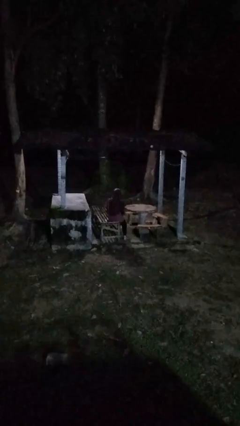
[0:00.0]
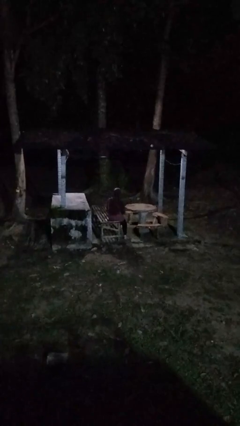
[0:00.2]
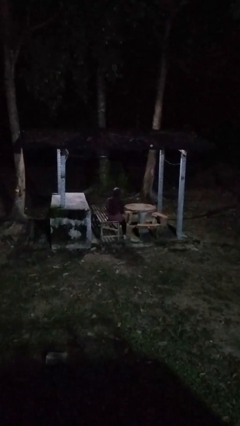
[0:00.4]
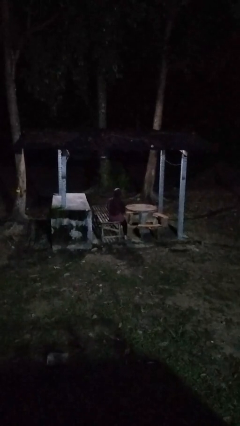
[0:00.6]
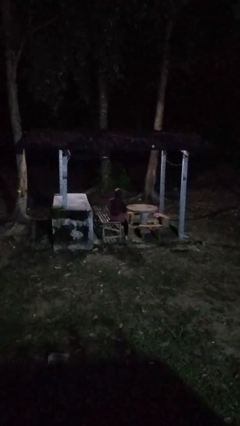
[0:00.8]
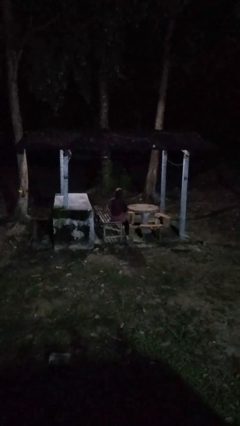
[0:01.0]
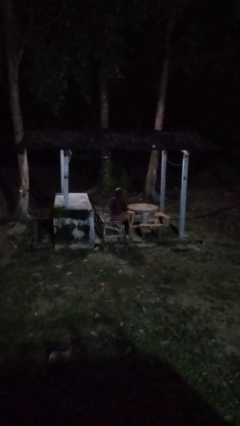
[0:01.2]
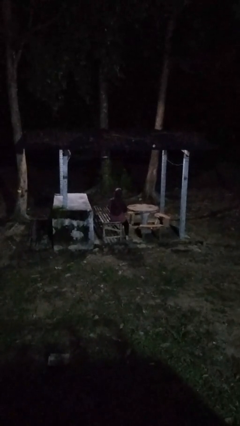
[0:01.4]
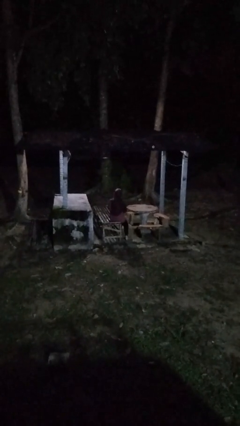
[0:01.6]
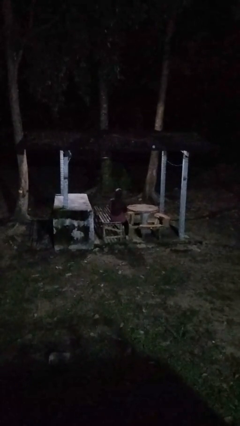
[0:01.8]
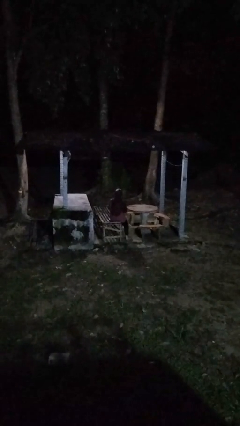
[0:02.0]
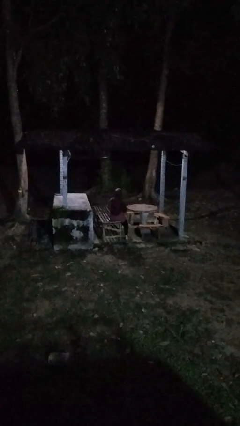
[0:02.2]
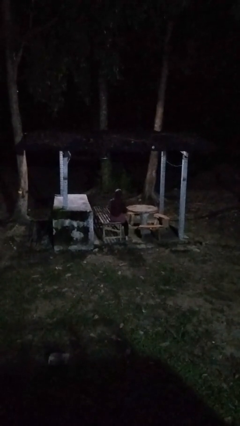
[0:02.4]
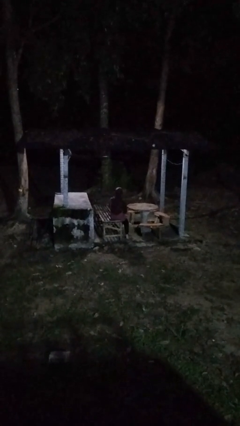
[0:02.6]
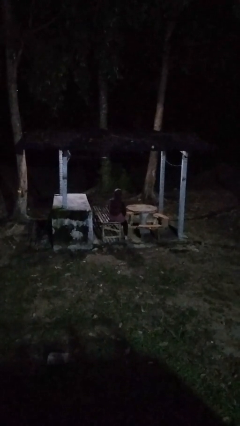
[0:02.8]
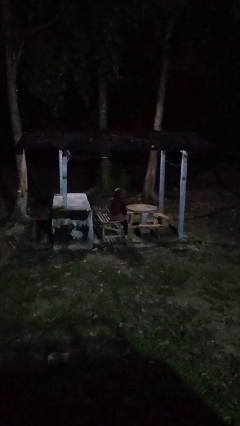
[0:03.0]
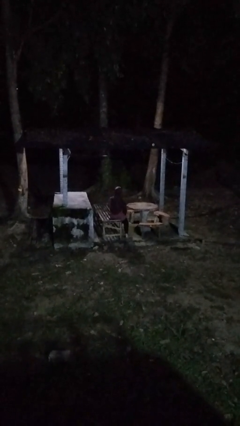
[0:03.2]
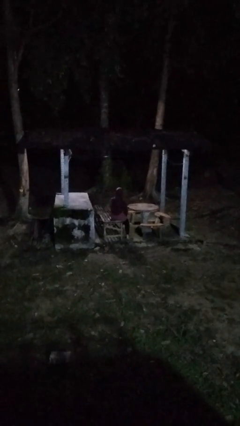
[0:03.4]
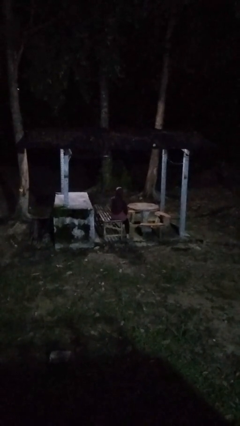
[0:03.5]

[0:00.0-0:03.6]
person paints fingernails

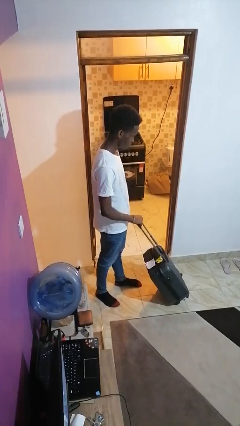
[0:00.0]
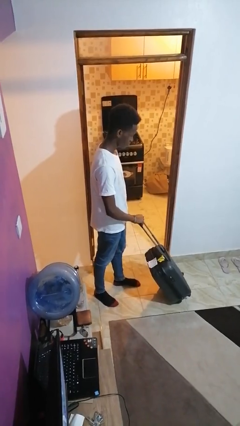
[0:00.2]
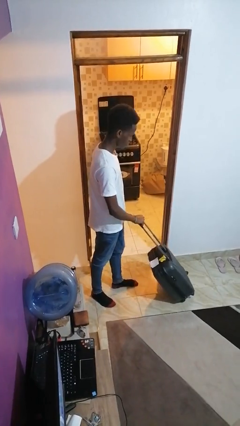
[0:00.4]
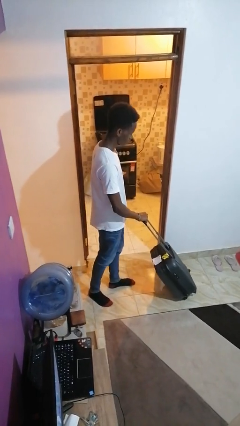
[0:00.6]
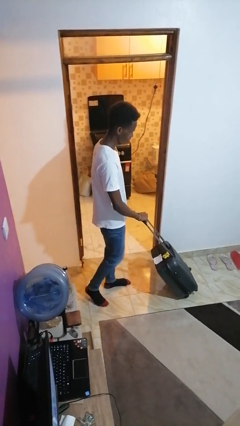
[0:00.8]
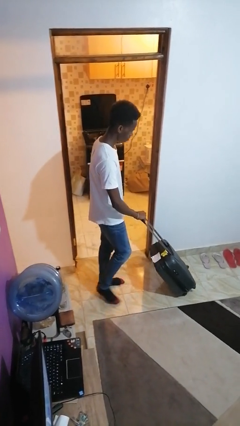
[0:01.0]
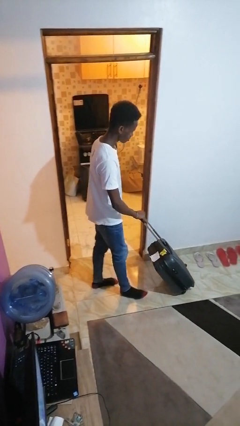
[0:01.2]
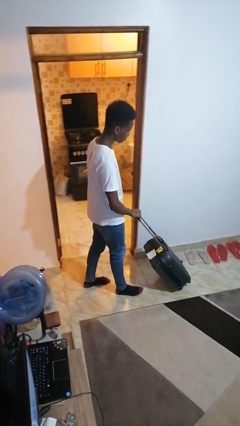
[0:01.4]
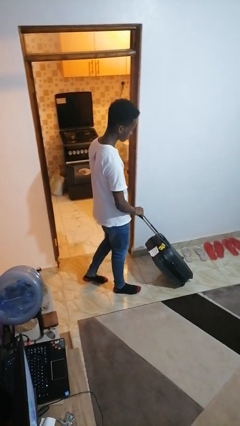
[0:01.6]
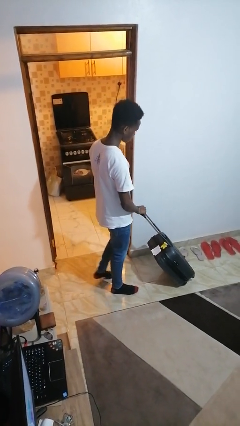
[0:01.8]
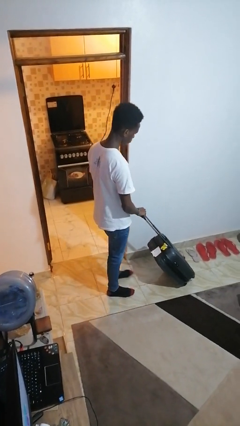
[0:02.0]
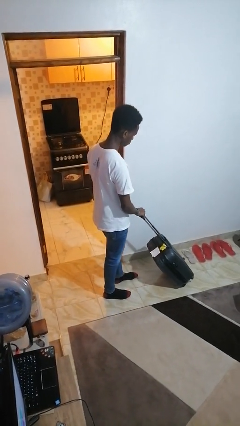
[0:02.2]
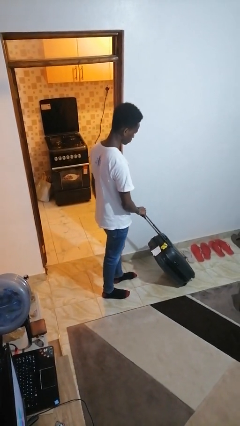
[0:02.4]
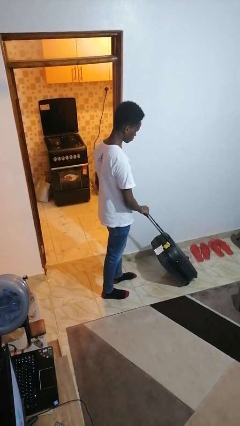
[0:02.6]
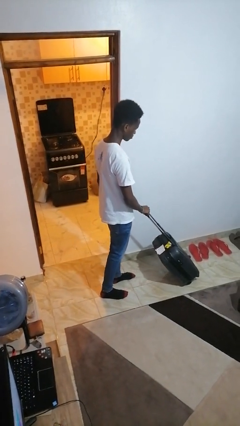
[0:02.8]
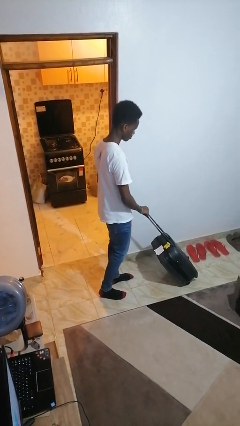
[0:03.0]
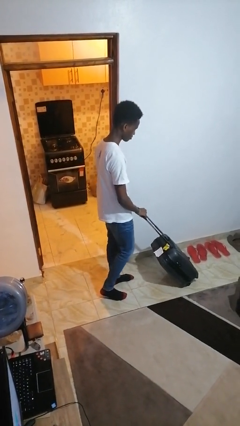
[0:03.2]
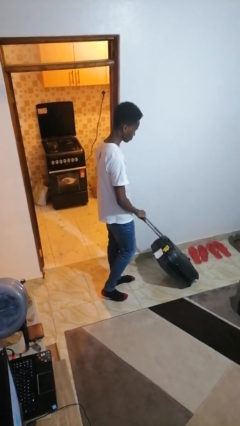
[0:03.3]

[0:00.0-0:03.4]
person pushes wheeled cart

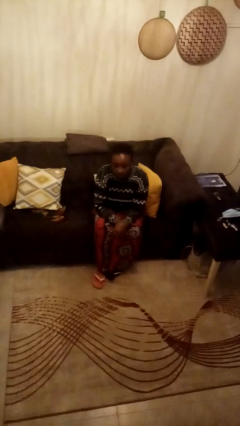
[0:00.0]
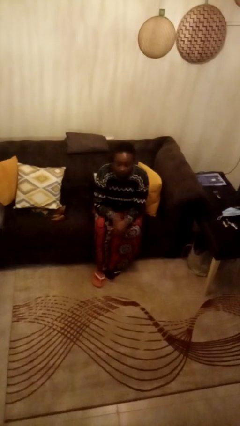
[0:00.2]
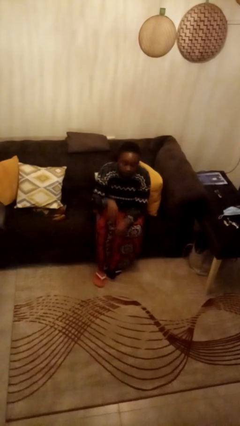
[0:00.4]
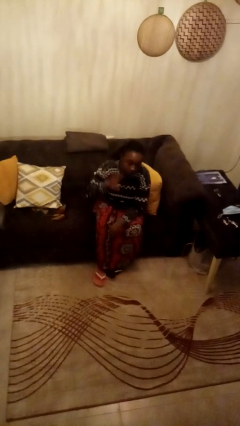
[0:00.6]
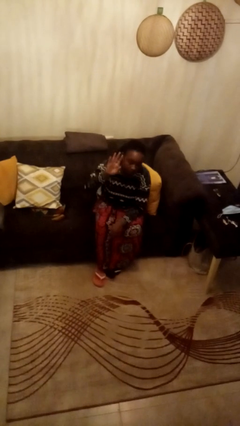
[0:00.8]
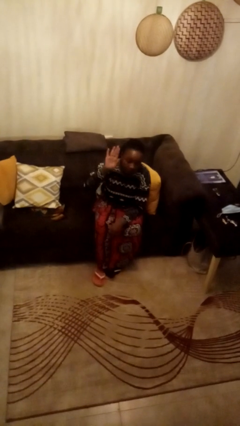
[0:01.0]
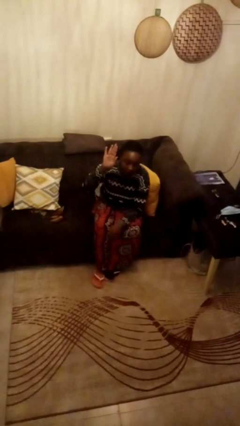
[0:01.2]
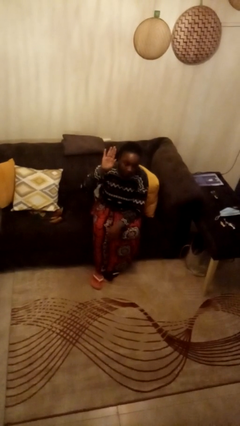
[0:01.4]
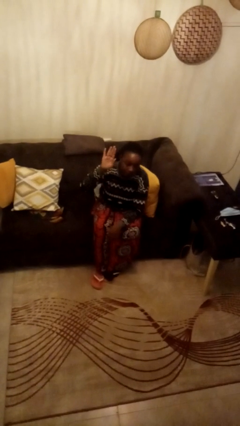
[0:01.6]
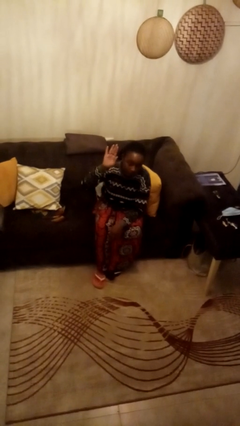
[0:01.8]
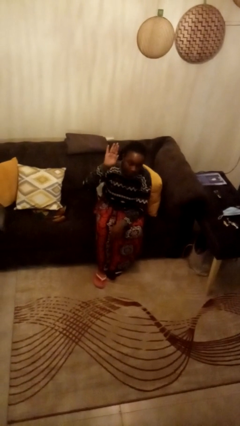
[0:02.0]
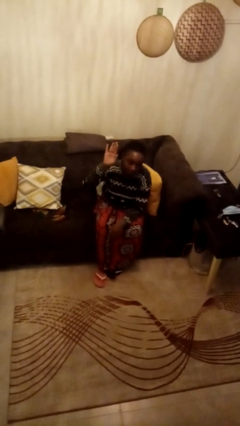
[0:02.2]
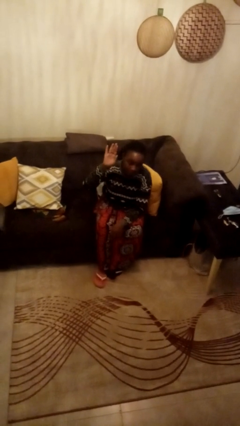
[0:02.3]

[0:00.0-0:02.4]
person gestures raise hand

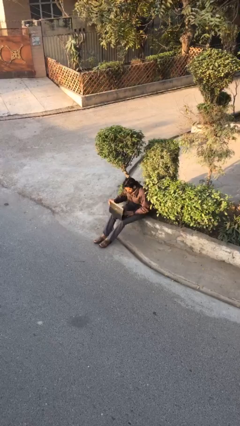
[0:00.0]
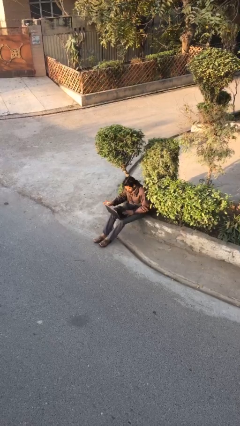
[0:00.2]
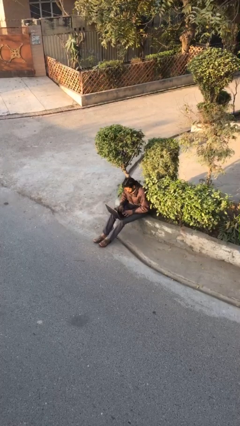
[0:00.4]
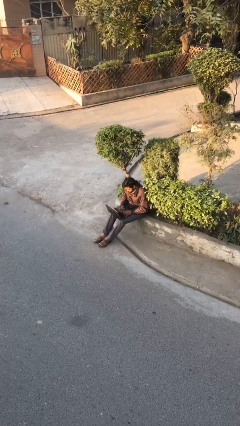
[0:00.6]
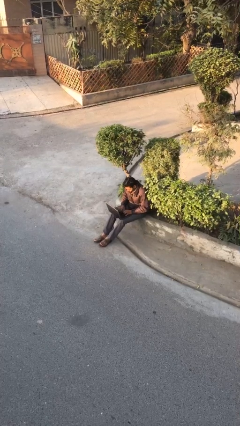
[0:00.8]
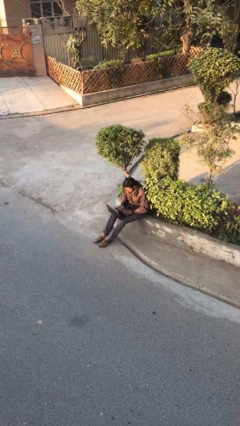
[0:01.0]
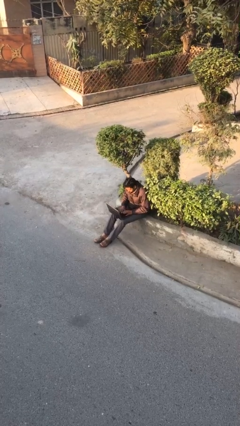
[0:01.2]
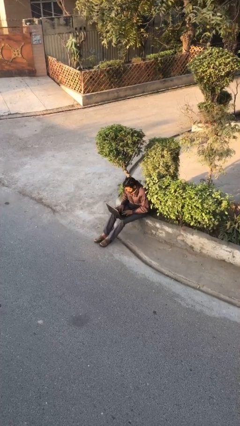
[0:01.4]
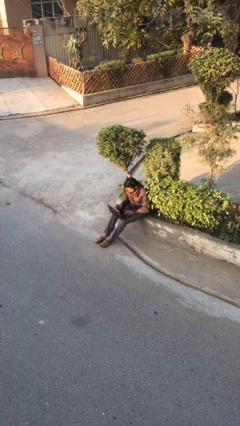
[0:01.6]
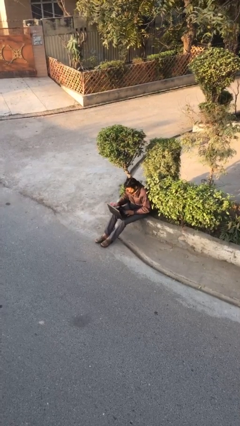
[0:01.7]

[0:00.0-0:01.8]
person interacts with laptop

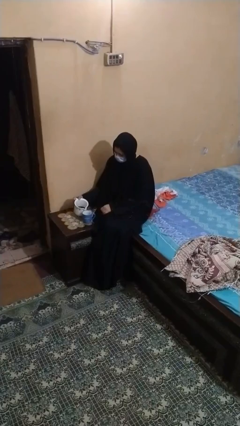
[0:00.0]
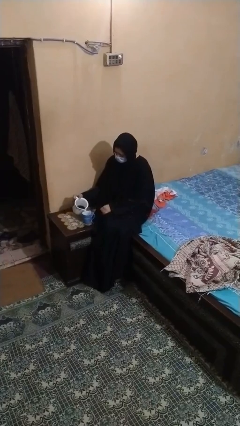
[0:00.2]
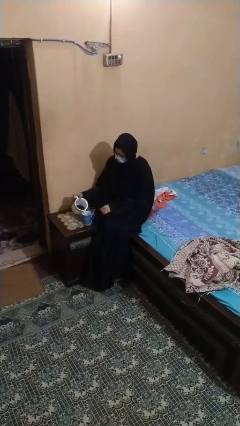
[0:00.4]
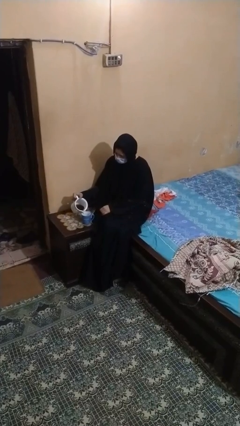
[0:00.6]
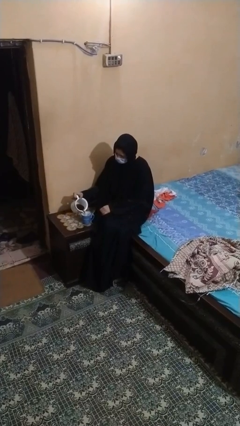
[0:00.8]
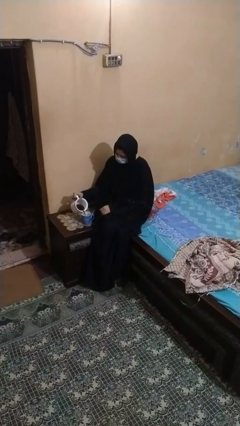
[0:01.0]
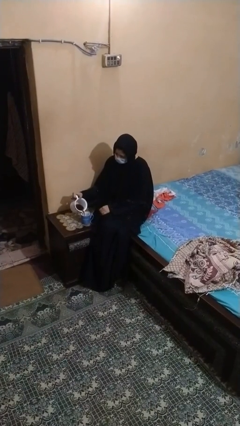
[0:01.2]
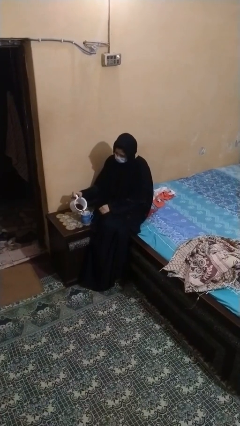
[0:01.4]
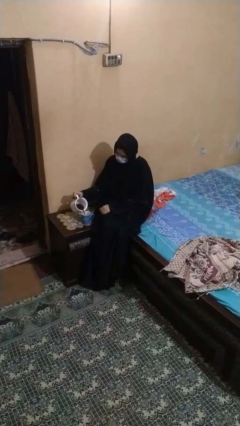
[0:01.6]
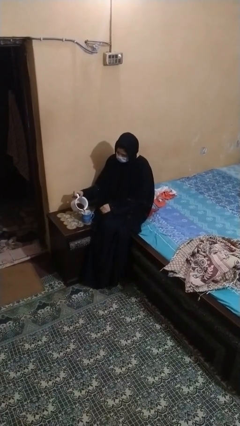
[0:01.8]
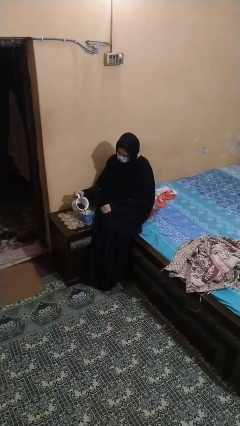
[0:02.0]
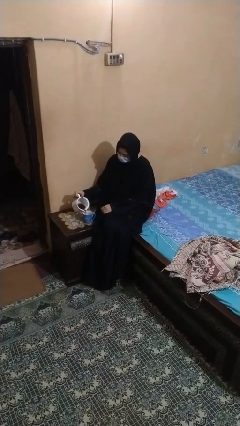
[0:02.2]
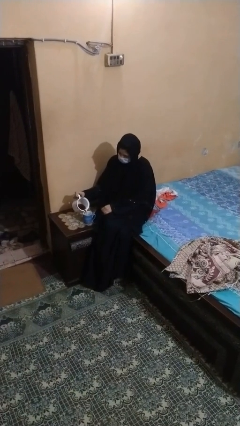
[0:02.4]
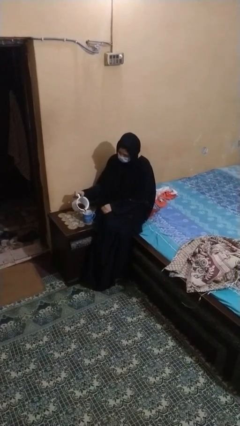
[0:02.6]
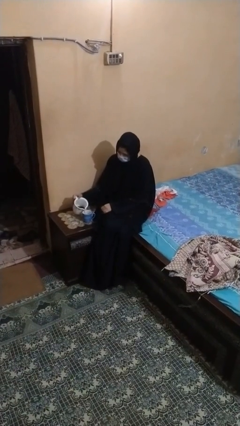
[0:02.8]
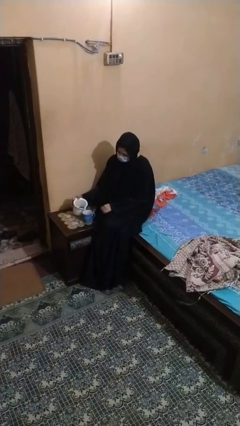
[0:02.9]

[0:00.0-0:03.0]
person pours coffee into mug

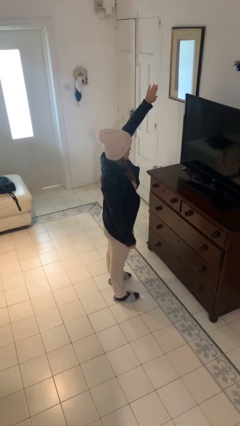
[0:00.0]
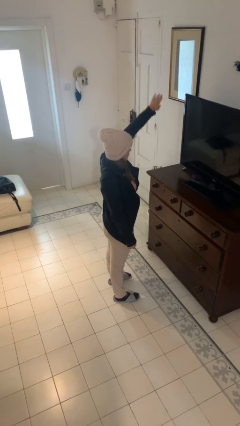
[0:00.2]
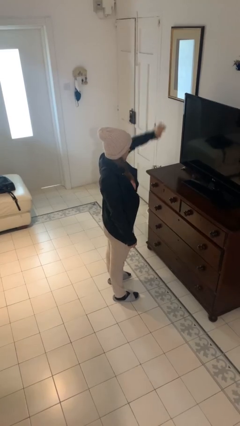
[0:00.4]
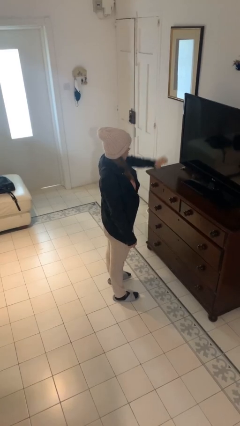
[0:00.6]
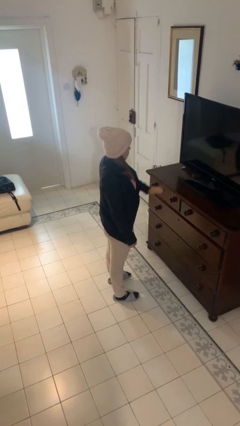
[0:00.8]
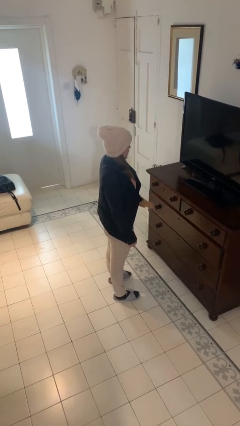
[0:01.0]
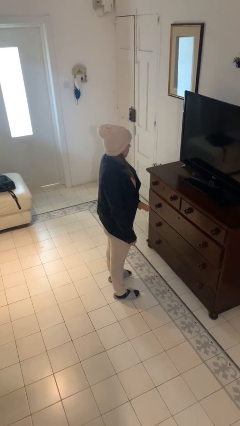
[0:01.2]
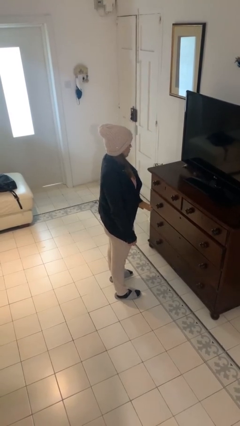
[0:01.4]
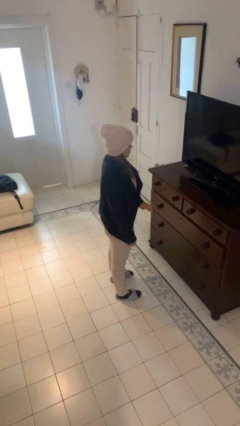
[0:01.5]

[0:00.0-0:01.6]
person gestures swipe down

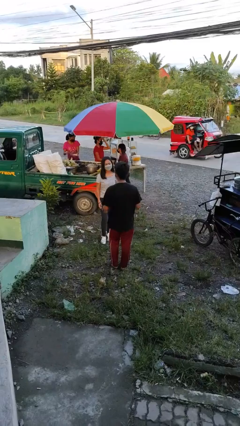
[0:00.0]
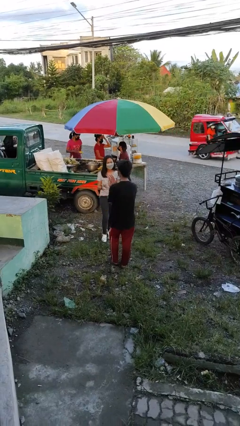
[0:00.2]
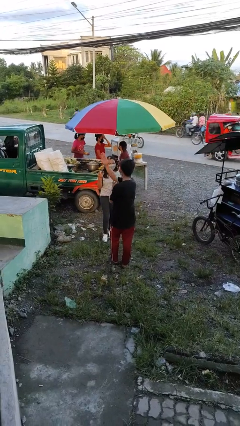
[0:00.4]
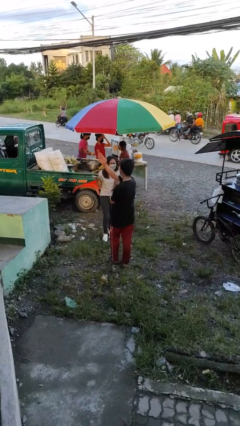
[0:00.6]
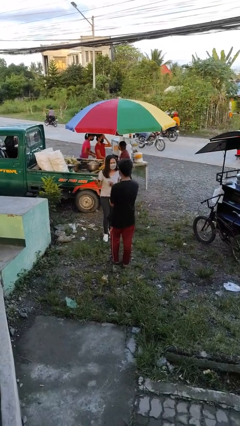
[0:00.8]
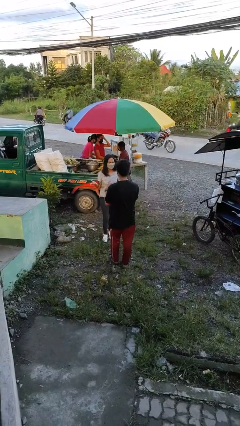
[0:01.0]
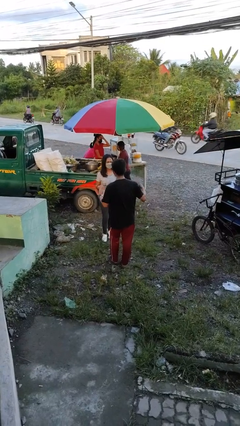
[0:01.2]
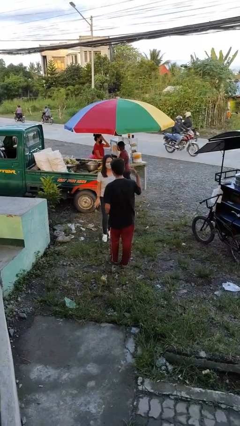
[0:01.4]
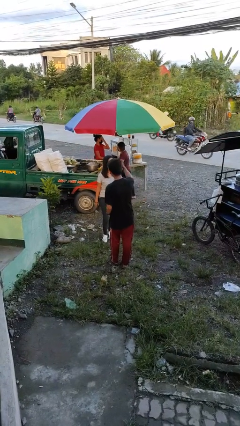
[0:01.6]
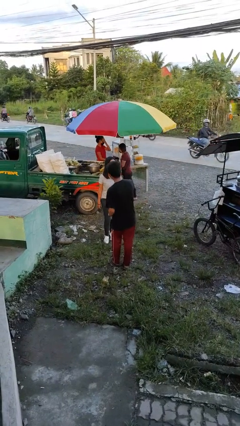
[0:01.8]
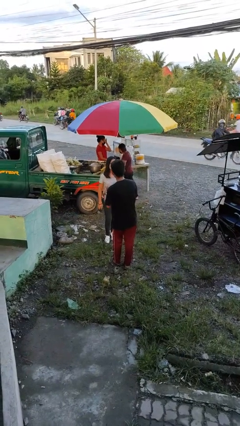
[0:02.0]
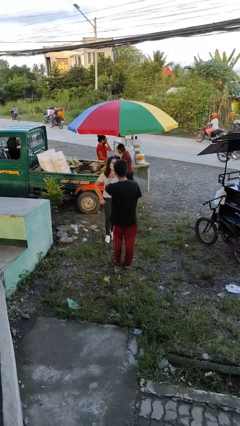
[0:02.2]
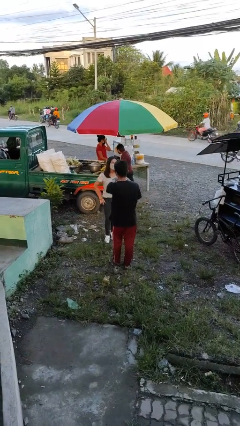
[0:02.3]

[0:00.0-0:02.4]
person talks to person
